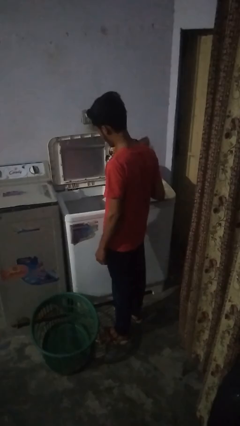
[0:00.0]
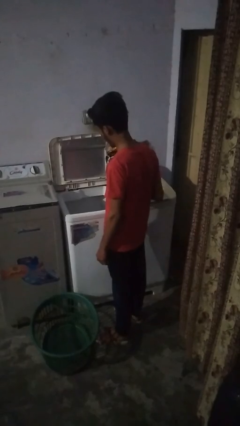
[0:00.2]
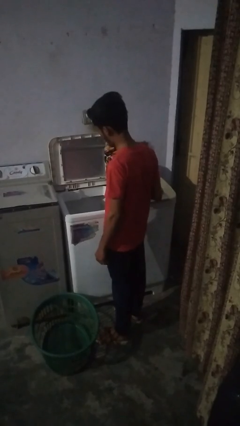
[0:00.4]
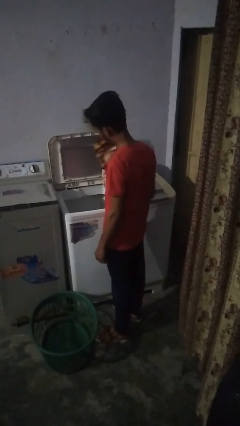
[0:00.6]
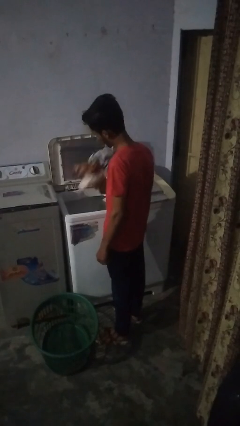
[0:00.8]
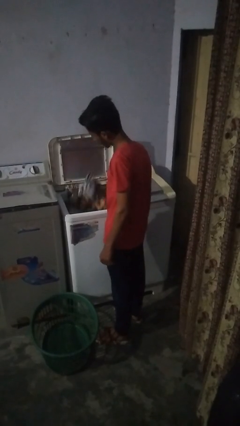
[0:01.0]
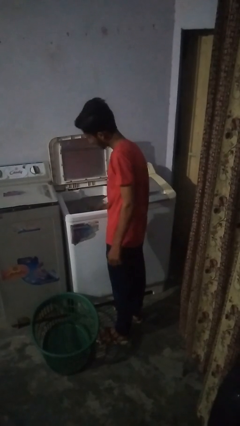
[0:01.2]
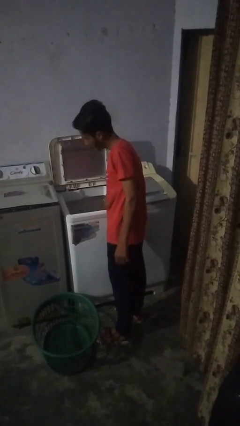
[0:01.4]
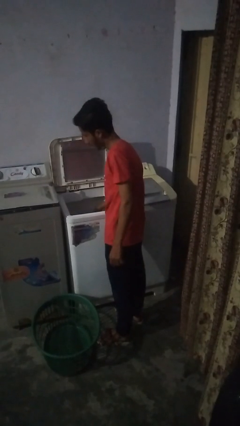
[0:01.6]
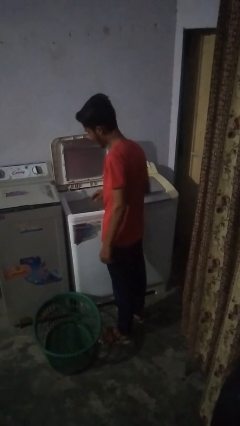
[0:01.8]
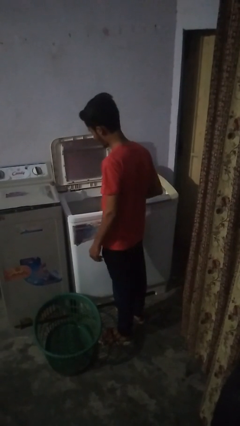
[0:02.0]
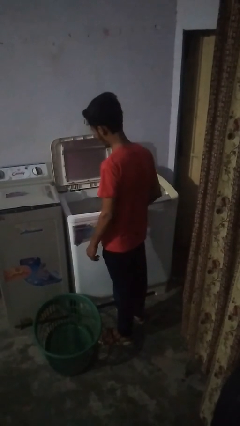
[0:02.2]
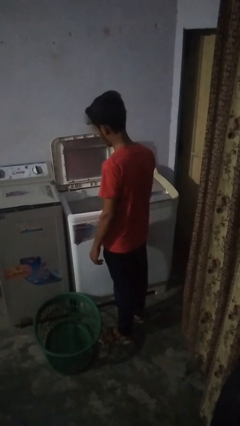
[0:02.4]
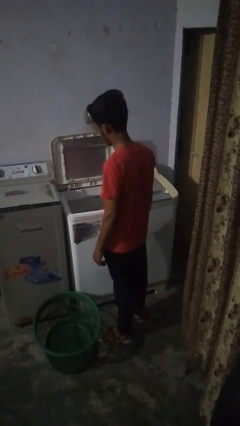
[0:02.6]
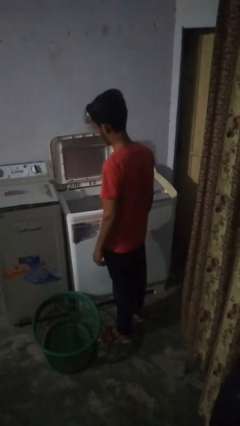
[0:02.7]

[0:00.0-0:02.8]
person loads clotheswasher

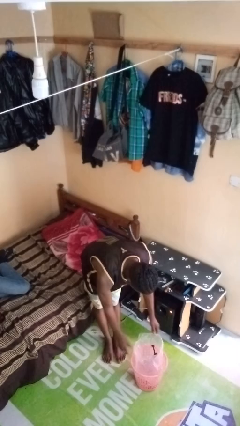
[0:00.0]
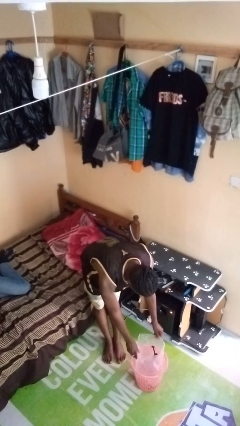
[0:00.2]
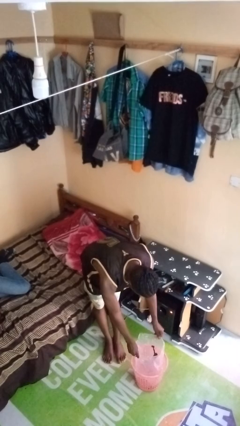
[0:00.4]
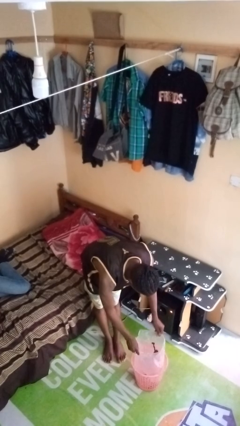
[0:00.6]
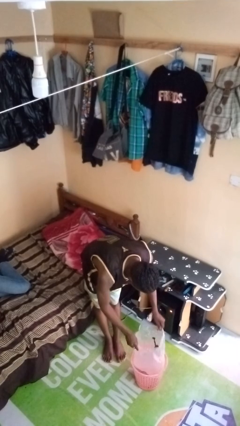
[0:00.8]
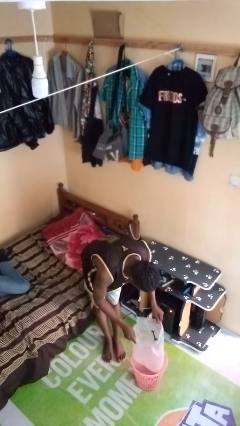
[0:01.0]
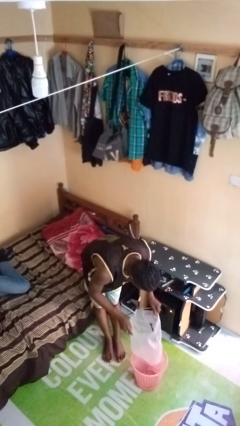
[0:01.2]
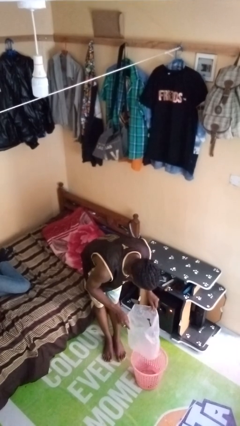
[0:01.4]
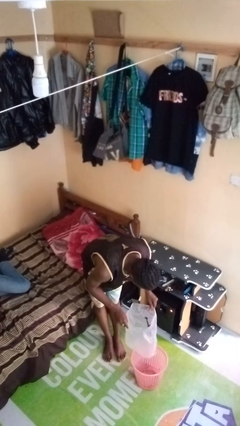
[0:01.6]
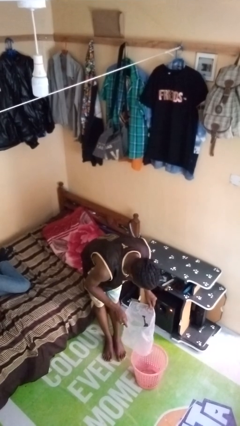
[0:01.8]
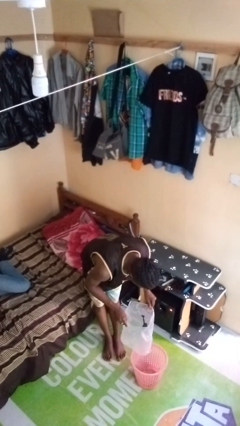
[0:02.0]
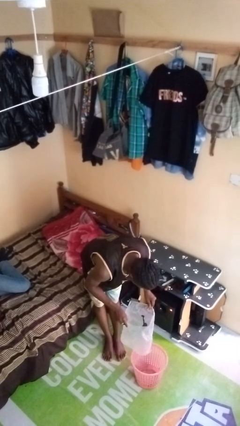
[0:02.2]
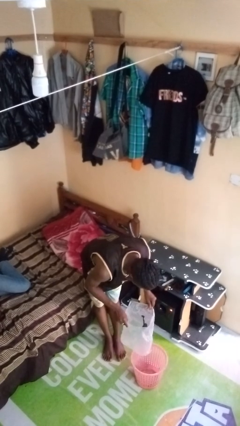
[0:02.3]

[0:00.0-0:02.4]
person removes trashbag from trashcan

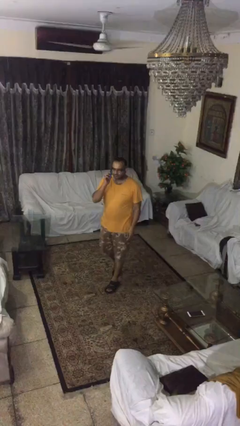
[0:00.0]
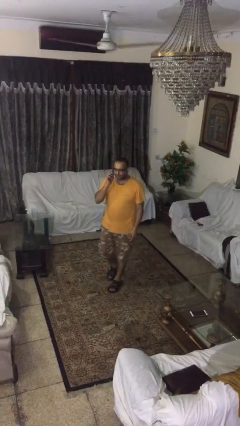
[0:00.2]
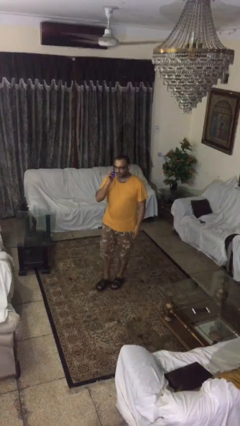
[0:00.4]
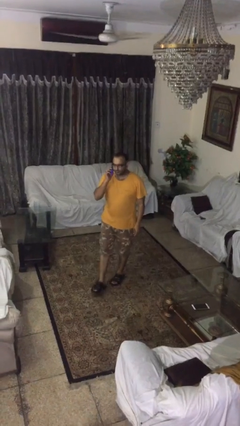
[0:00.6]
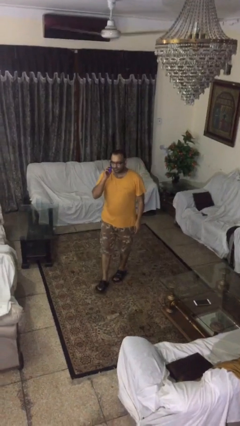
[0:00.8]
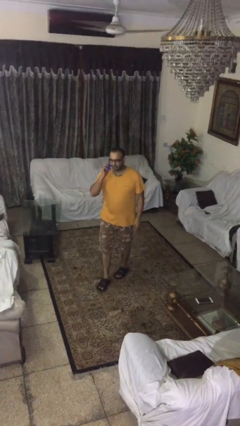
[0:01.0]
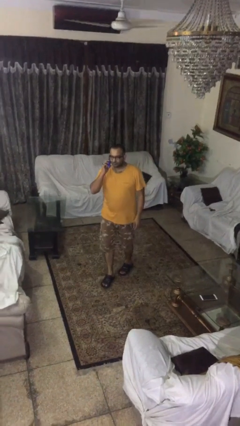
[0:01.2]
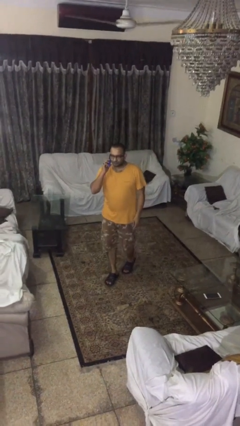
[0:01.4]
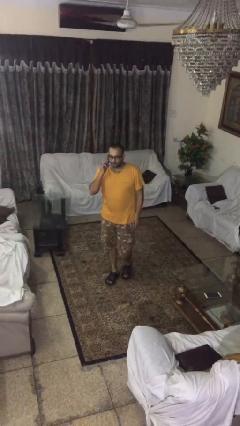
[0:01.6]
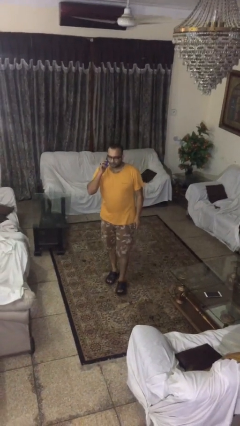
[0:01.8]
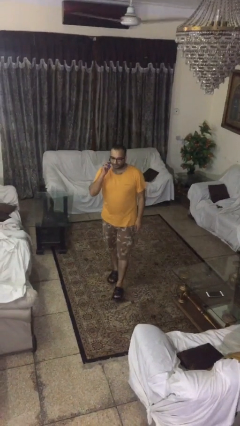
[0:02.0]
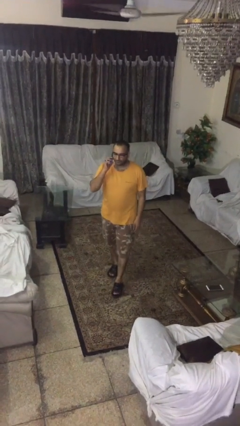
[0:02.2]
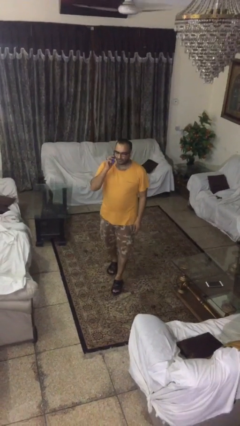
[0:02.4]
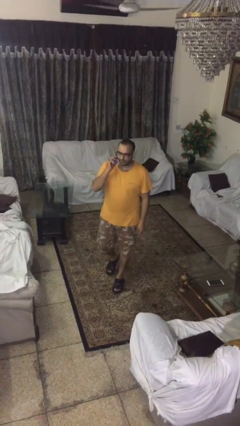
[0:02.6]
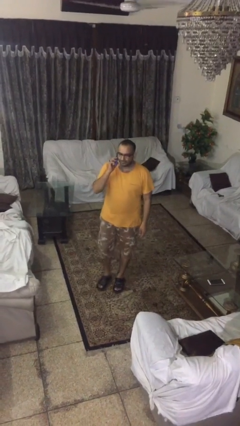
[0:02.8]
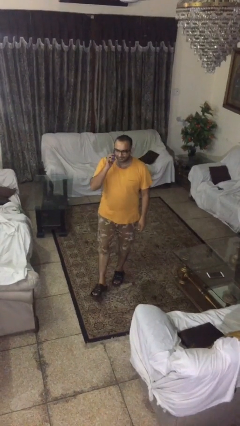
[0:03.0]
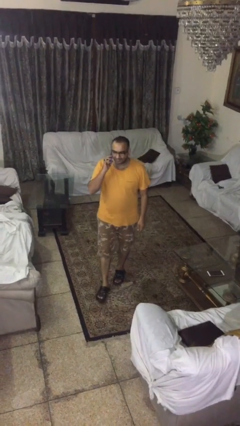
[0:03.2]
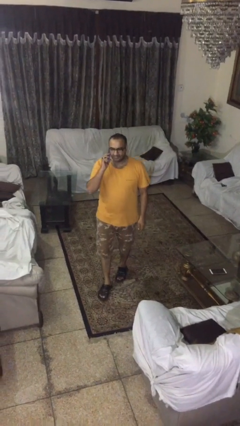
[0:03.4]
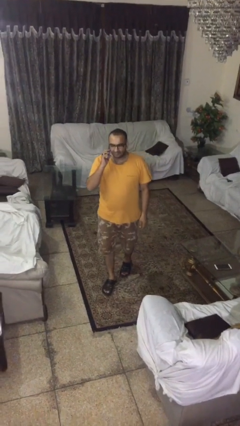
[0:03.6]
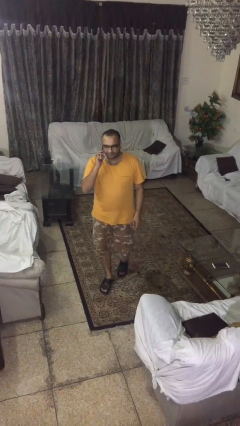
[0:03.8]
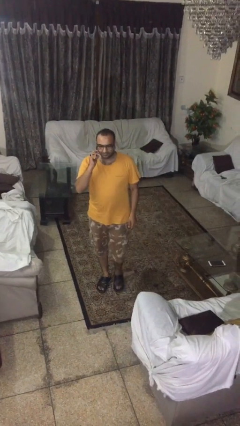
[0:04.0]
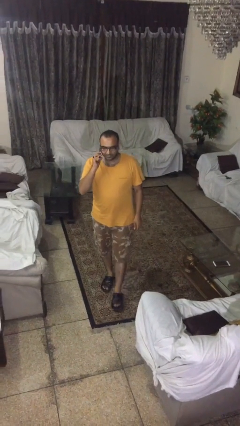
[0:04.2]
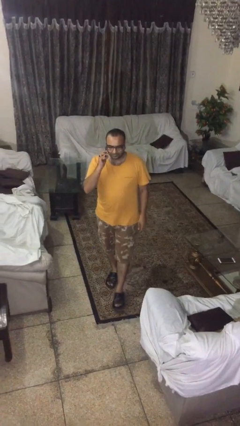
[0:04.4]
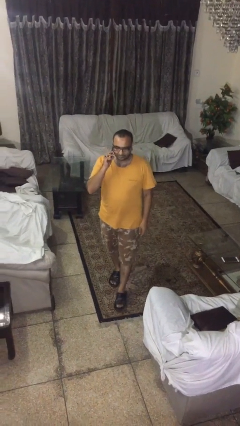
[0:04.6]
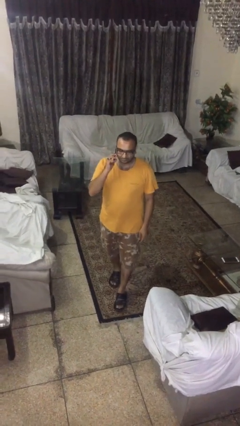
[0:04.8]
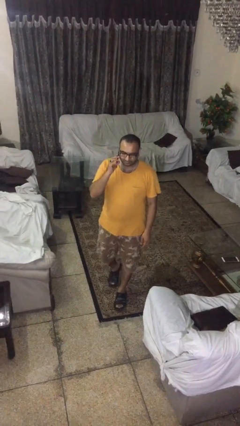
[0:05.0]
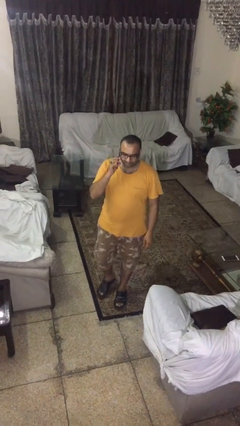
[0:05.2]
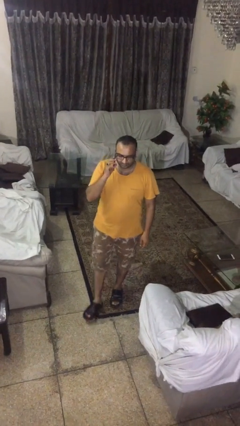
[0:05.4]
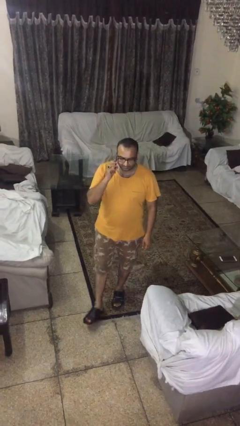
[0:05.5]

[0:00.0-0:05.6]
person talks on phone

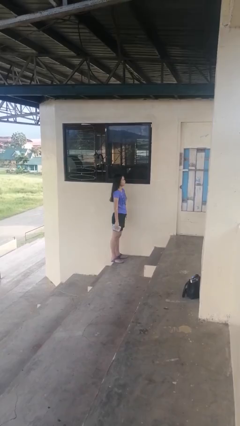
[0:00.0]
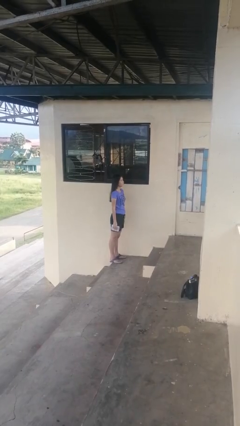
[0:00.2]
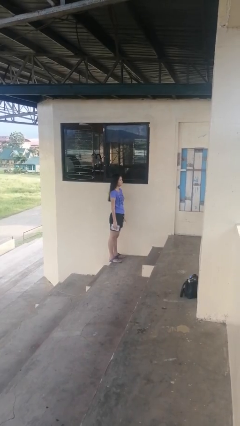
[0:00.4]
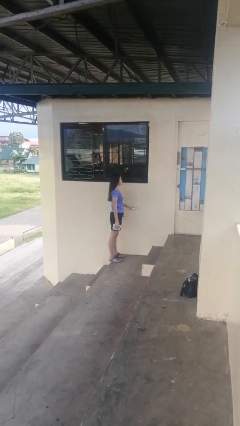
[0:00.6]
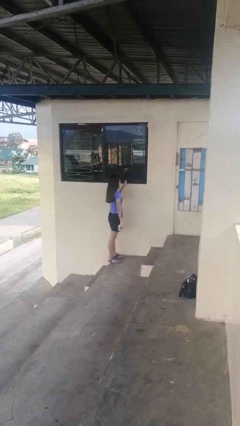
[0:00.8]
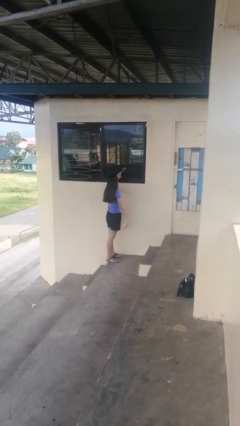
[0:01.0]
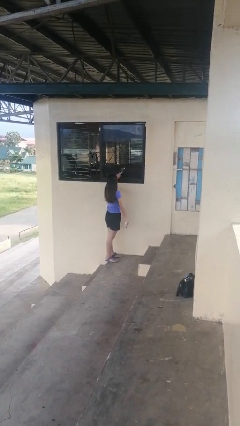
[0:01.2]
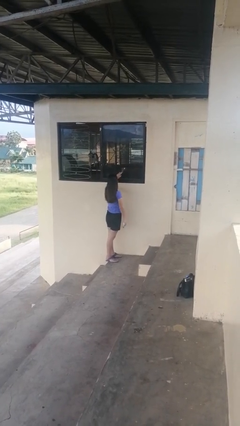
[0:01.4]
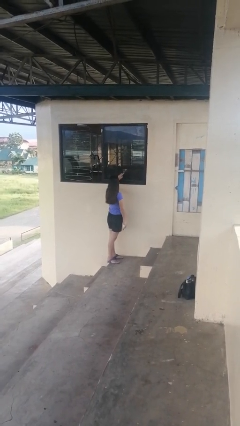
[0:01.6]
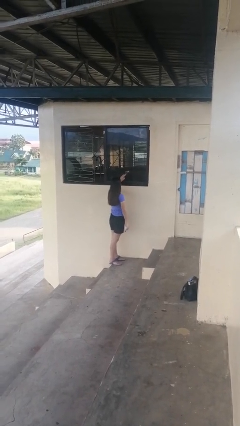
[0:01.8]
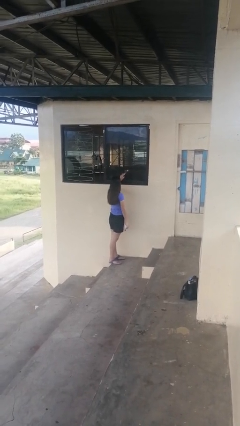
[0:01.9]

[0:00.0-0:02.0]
person sprays from bottle

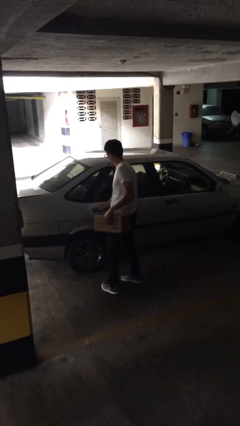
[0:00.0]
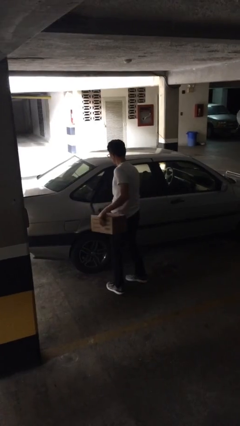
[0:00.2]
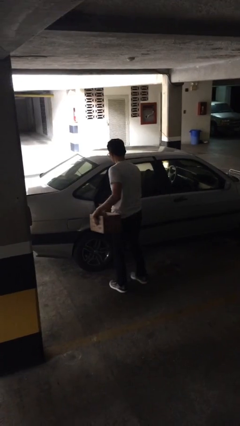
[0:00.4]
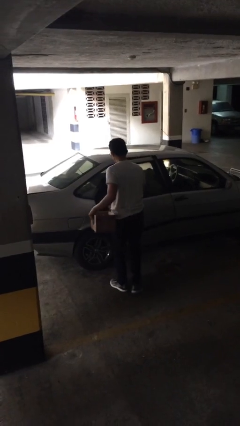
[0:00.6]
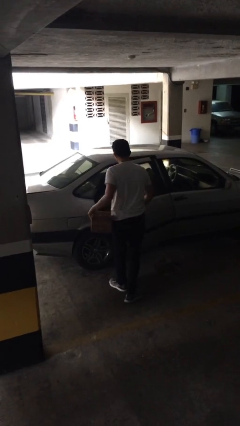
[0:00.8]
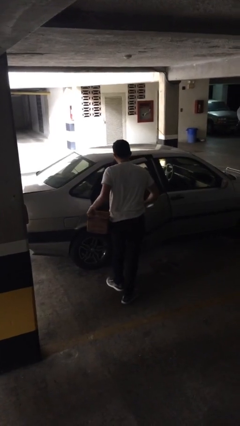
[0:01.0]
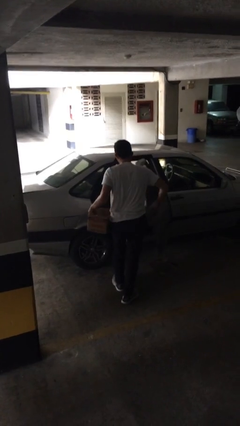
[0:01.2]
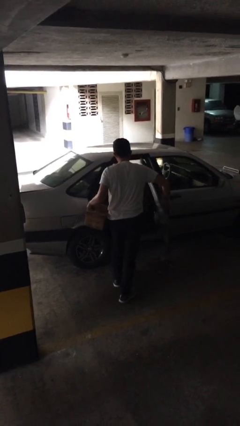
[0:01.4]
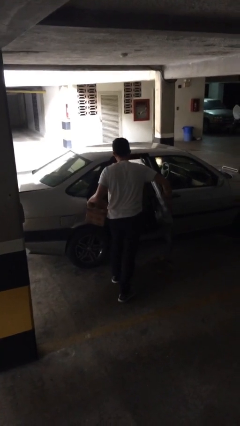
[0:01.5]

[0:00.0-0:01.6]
person opens car door

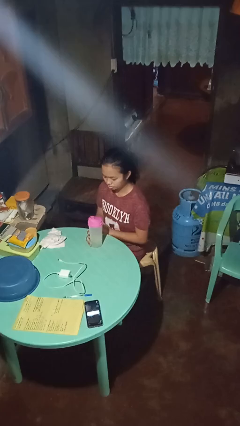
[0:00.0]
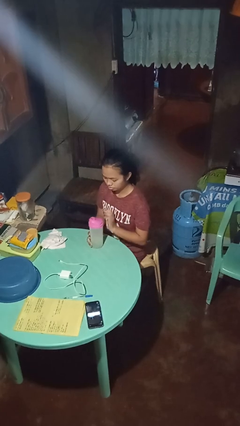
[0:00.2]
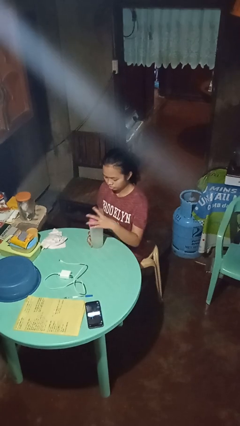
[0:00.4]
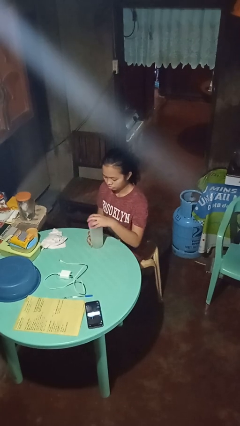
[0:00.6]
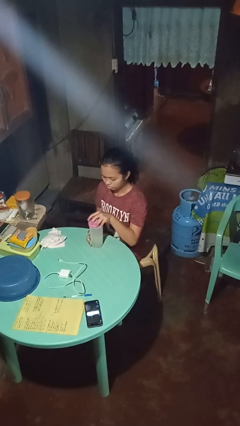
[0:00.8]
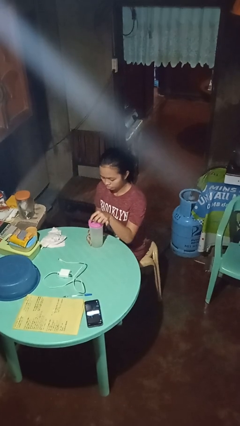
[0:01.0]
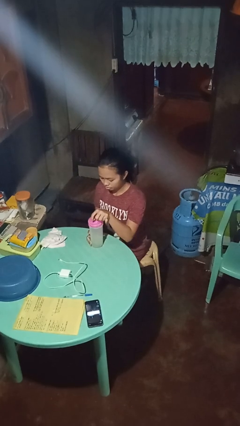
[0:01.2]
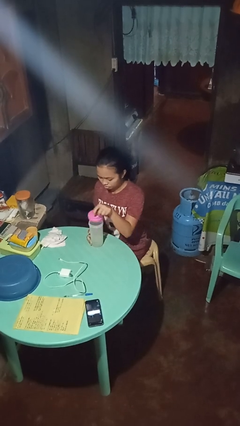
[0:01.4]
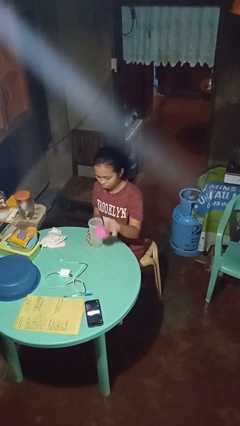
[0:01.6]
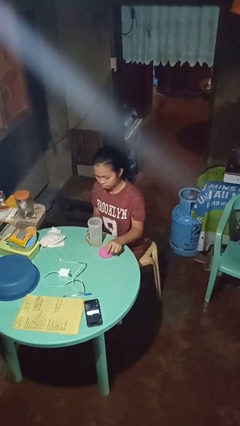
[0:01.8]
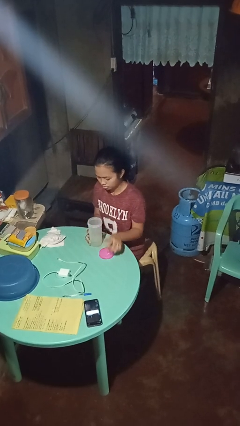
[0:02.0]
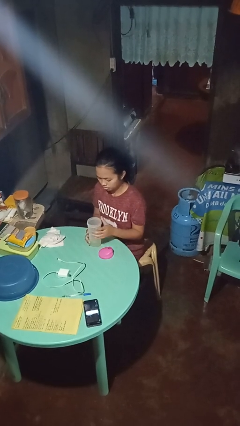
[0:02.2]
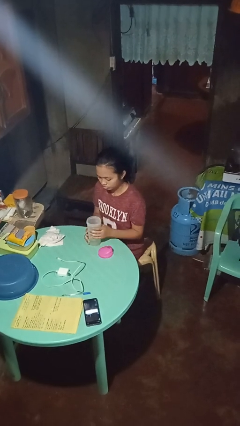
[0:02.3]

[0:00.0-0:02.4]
person unscrews lid from bottle

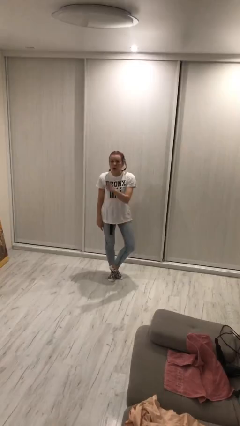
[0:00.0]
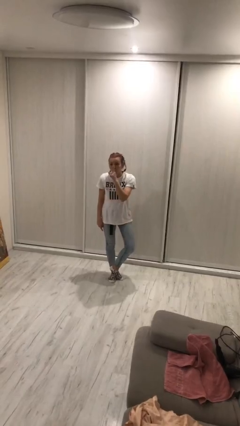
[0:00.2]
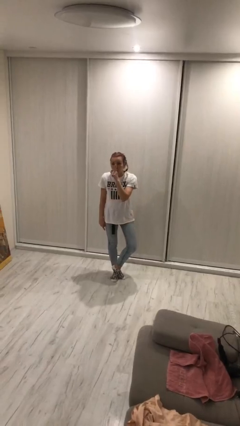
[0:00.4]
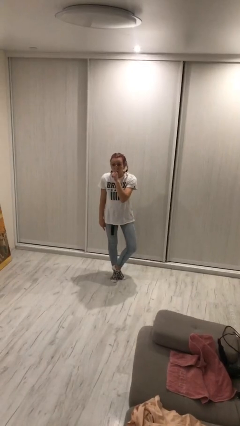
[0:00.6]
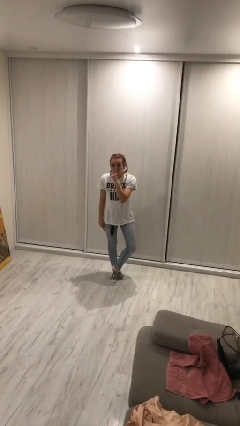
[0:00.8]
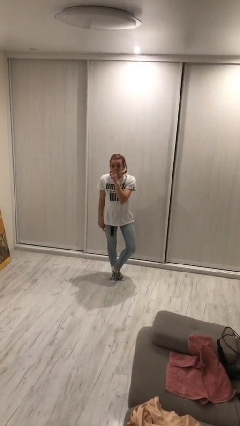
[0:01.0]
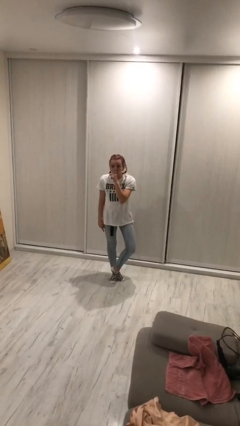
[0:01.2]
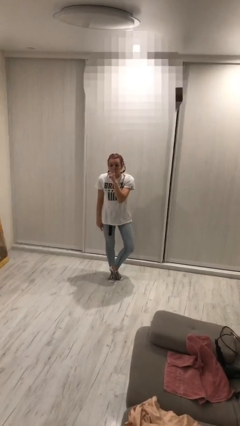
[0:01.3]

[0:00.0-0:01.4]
person gestures be quiet
